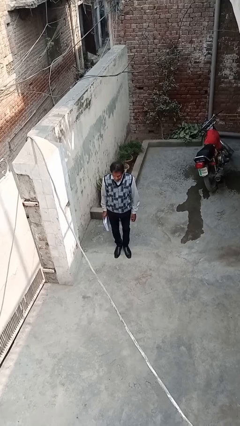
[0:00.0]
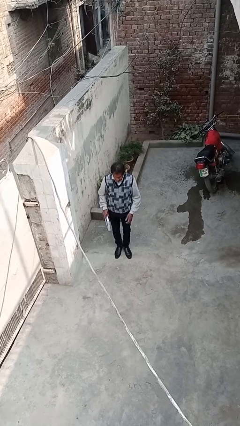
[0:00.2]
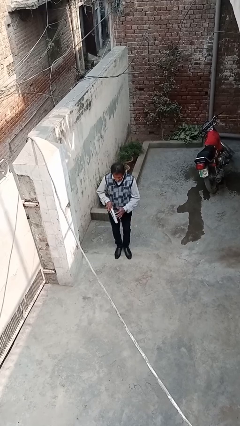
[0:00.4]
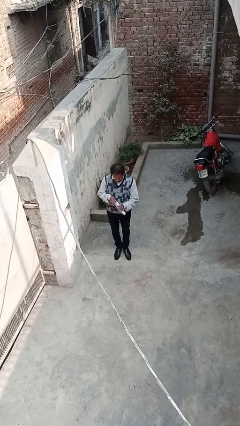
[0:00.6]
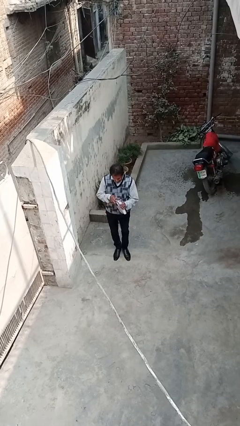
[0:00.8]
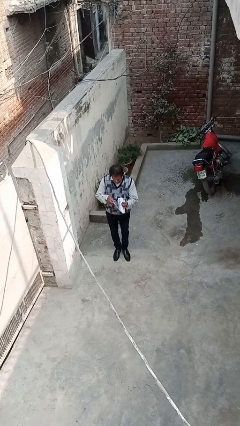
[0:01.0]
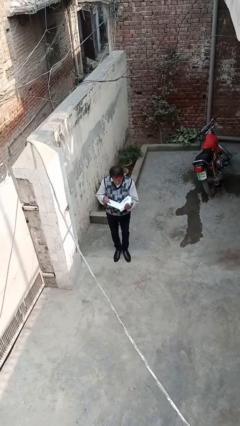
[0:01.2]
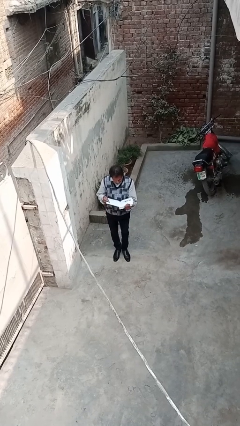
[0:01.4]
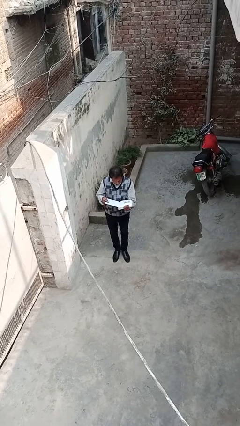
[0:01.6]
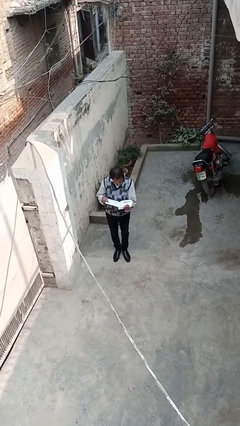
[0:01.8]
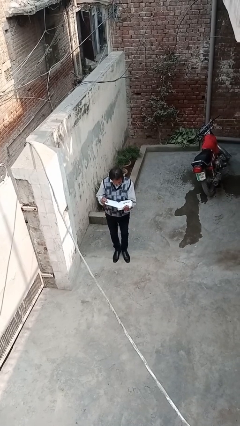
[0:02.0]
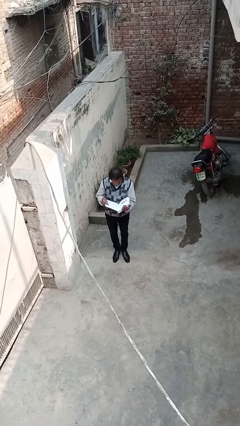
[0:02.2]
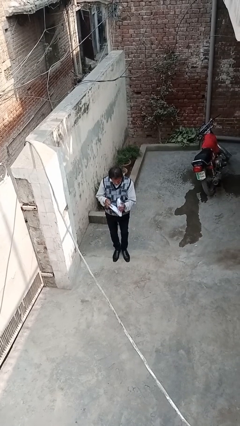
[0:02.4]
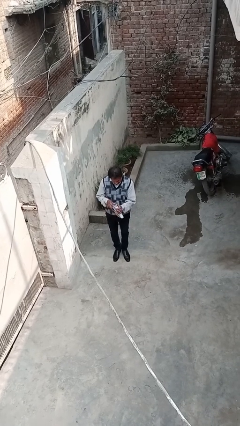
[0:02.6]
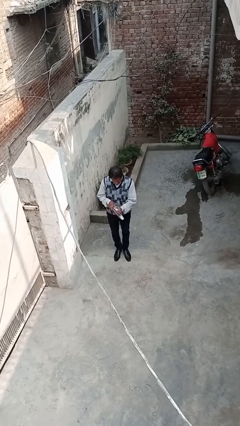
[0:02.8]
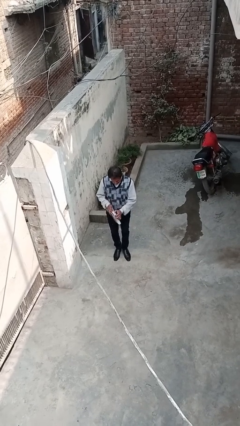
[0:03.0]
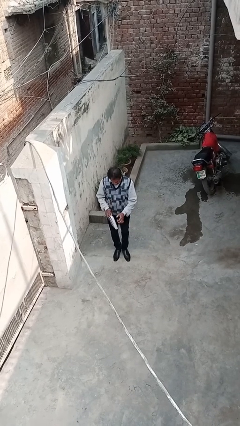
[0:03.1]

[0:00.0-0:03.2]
person reads document

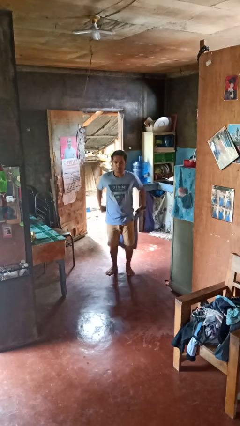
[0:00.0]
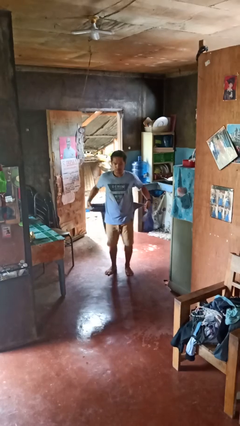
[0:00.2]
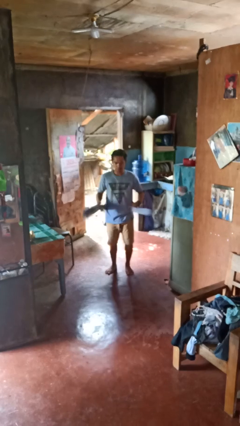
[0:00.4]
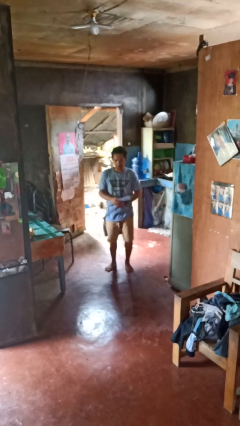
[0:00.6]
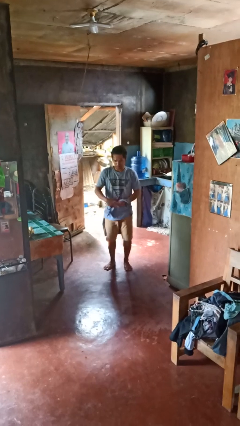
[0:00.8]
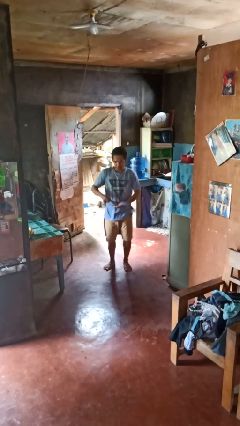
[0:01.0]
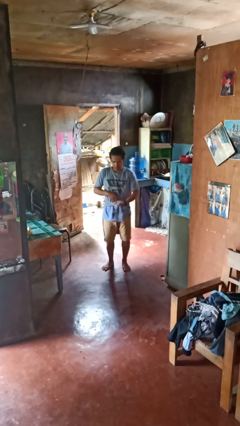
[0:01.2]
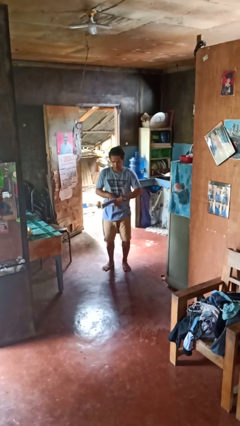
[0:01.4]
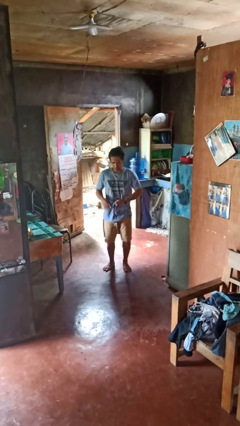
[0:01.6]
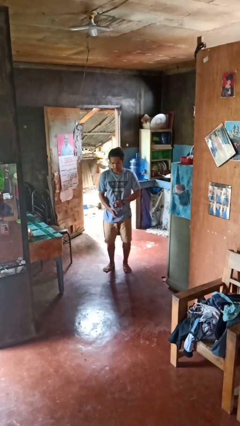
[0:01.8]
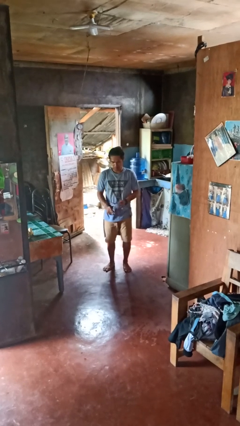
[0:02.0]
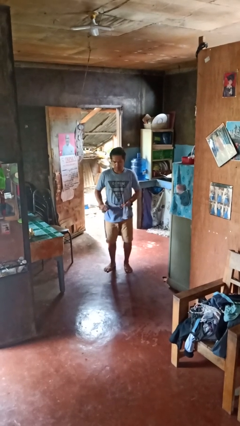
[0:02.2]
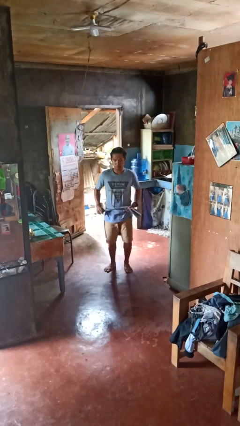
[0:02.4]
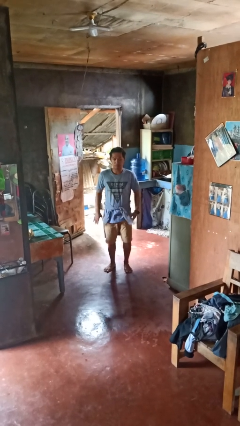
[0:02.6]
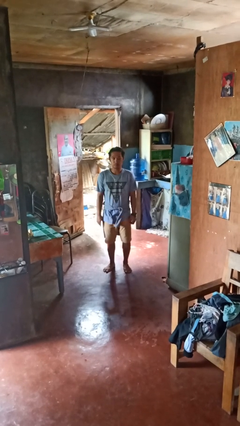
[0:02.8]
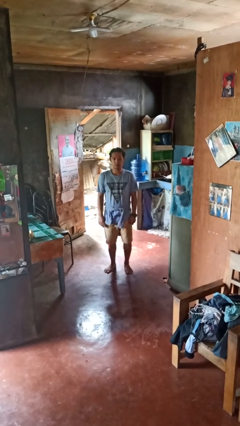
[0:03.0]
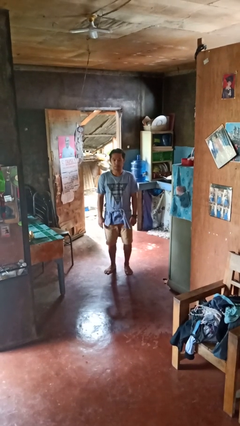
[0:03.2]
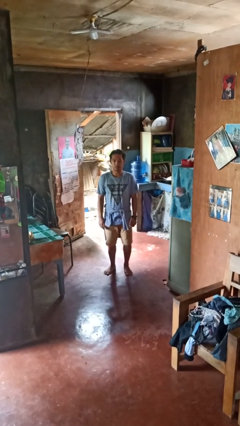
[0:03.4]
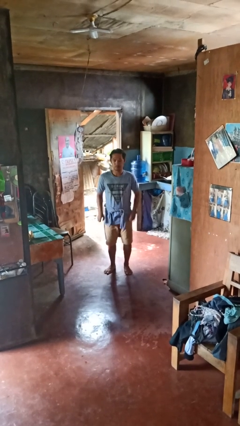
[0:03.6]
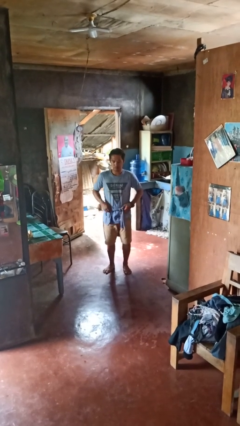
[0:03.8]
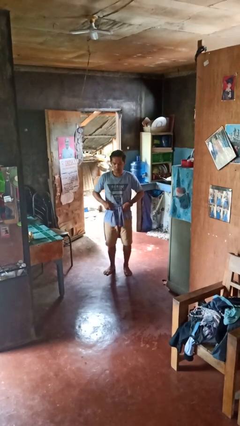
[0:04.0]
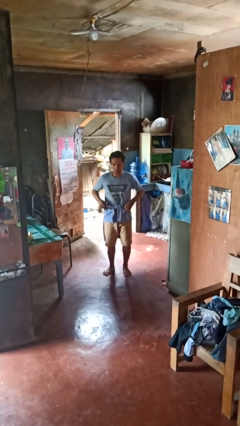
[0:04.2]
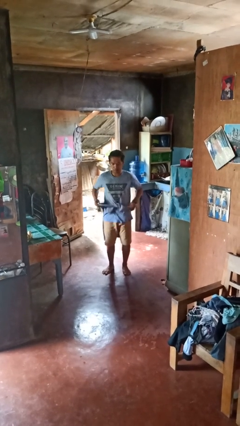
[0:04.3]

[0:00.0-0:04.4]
person ties jacket around waist

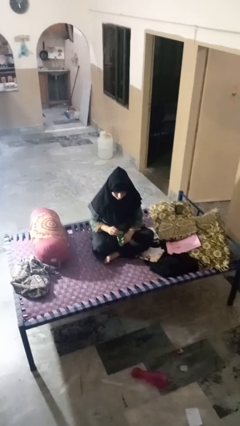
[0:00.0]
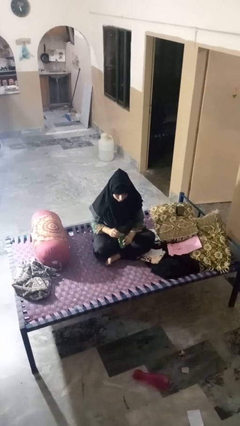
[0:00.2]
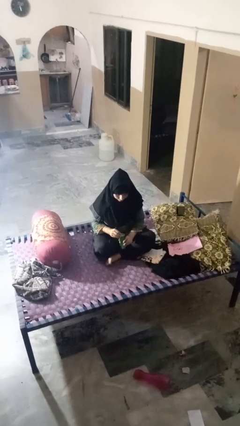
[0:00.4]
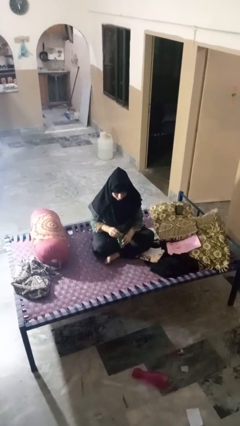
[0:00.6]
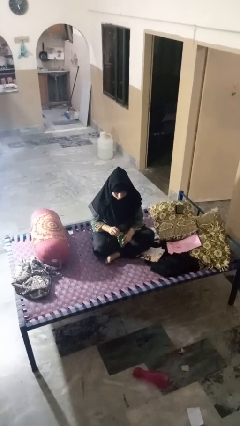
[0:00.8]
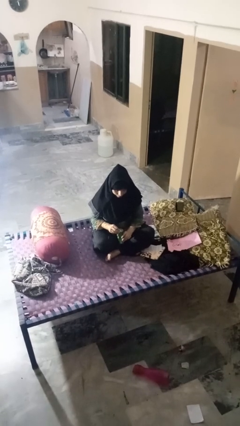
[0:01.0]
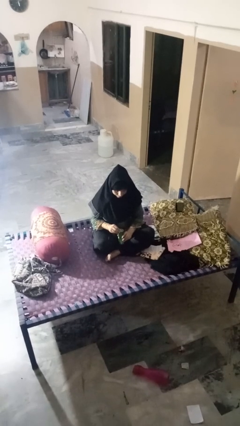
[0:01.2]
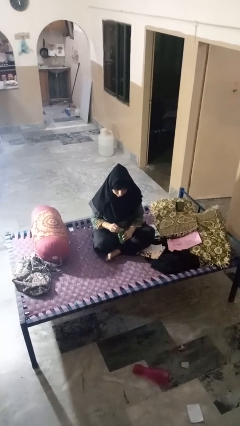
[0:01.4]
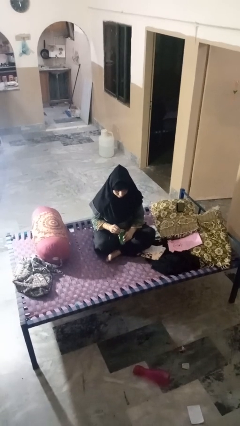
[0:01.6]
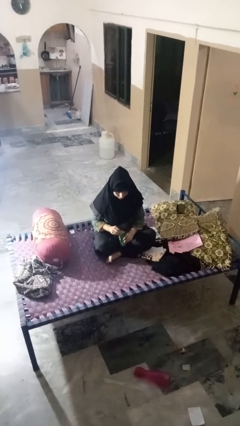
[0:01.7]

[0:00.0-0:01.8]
person opens can with can opener

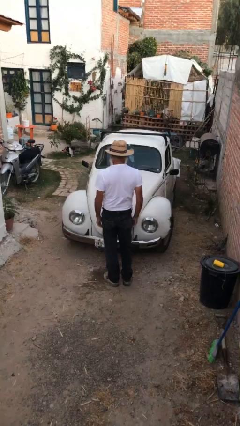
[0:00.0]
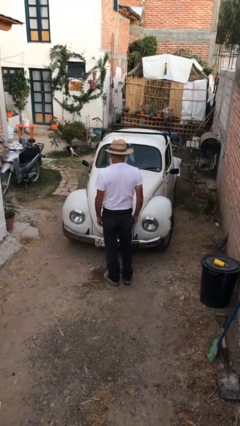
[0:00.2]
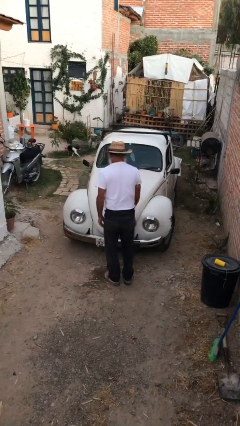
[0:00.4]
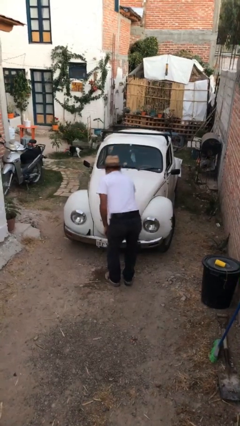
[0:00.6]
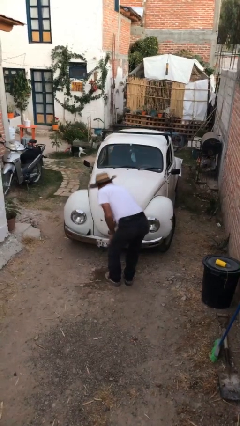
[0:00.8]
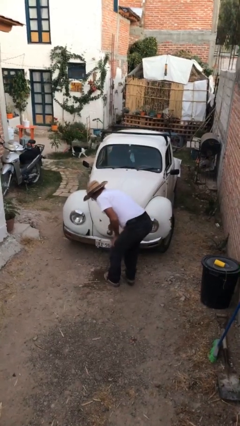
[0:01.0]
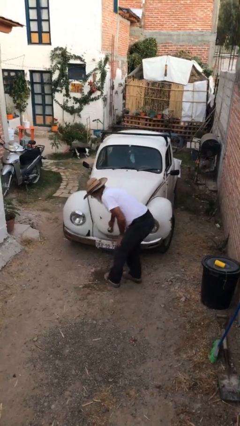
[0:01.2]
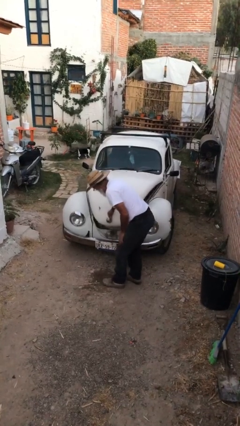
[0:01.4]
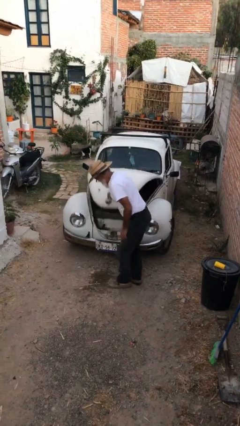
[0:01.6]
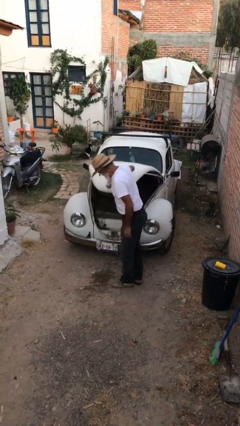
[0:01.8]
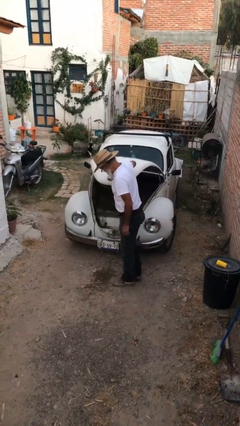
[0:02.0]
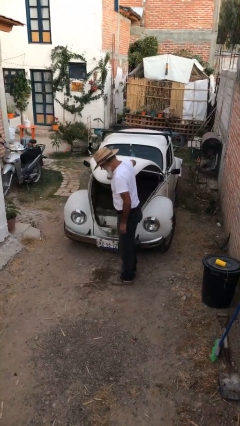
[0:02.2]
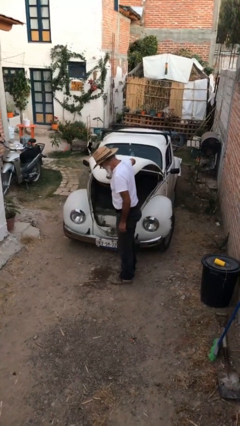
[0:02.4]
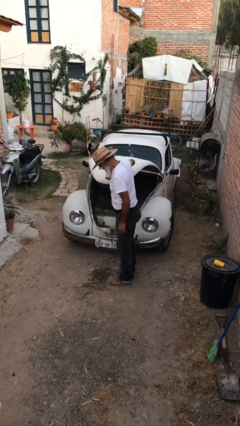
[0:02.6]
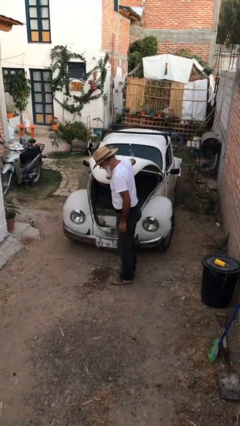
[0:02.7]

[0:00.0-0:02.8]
person opens car trunk

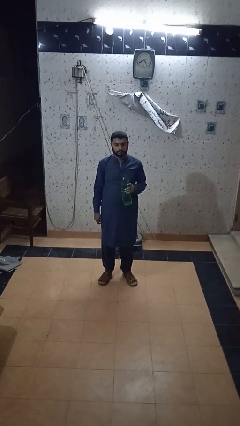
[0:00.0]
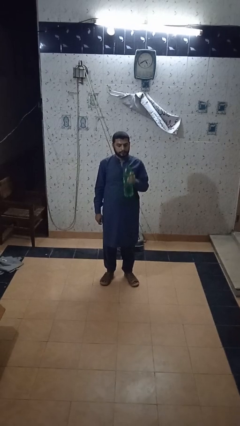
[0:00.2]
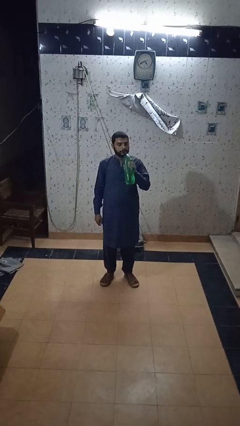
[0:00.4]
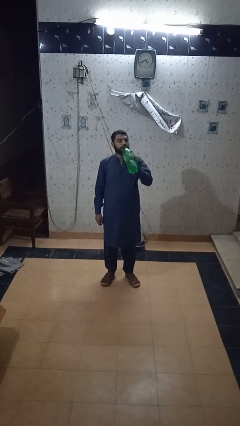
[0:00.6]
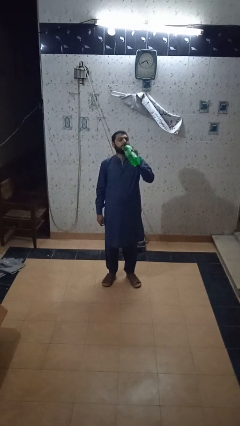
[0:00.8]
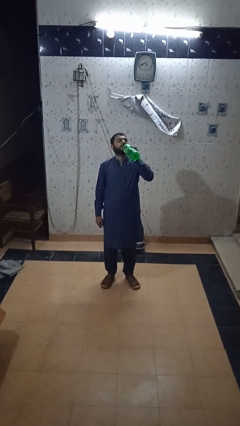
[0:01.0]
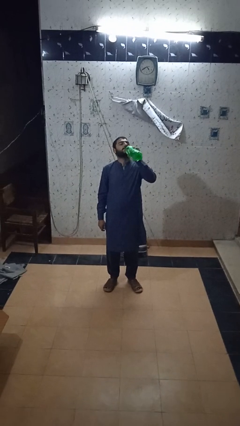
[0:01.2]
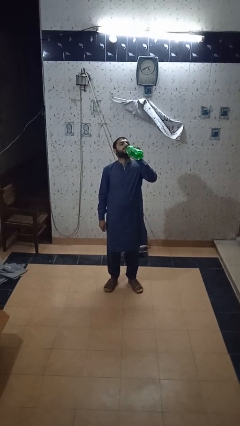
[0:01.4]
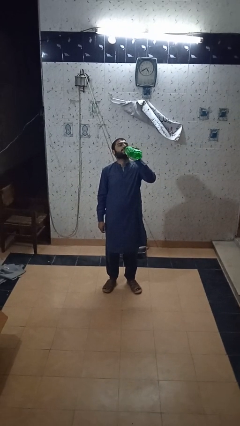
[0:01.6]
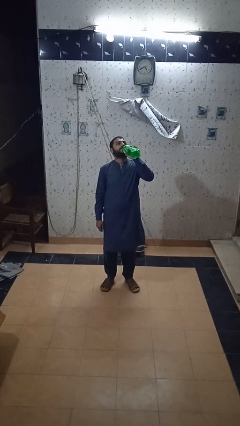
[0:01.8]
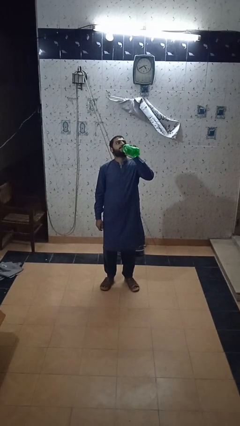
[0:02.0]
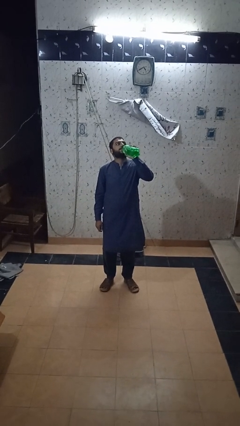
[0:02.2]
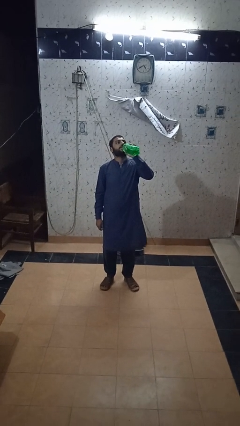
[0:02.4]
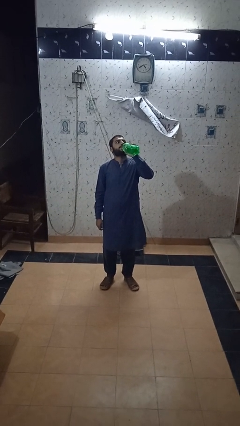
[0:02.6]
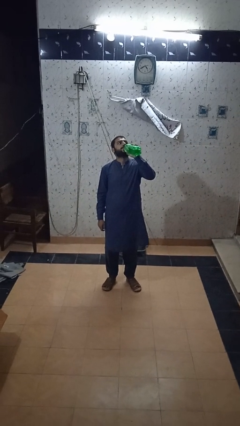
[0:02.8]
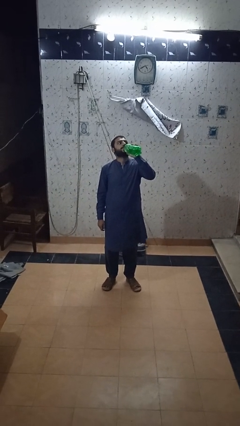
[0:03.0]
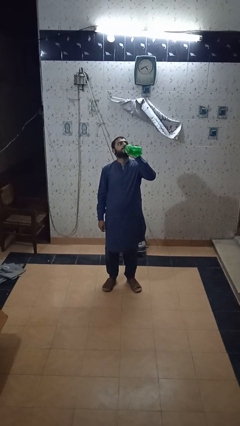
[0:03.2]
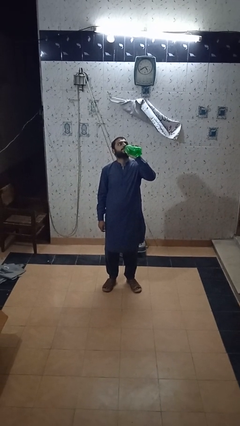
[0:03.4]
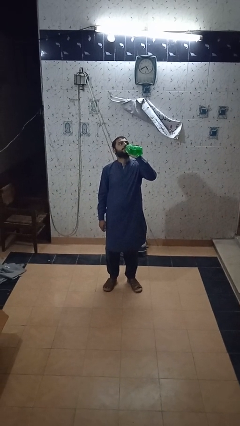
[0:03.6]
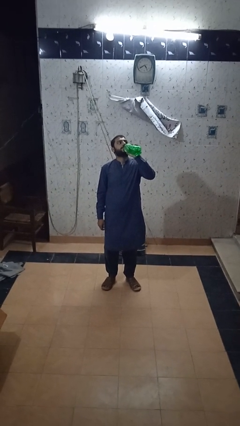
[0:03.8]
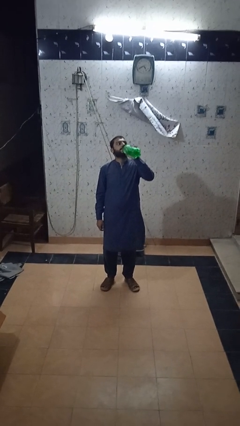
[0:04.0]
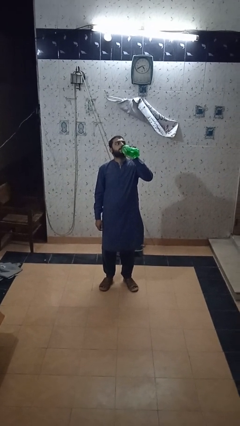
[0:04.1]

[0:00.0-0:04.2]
person drinks from bottle

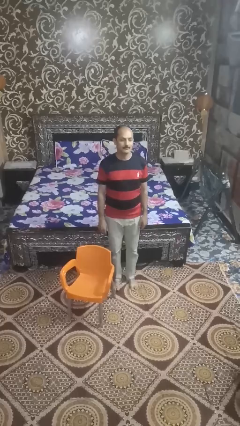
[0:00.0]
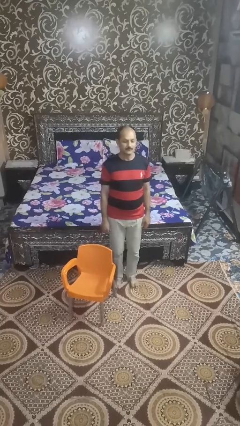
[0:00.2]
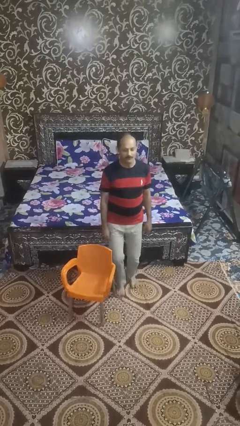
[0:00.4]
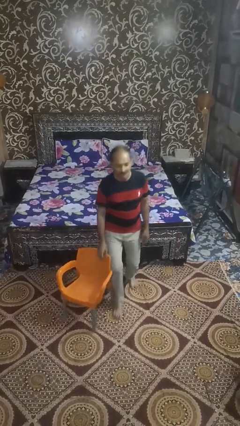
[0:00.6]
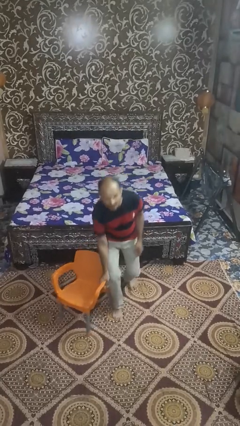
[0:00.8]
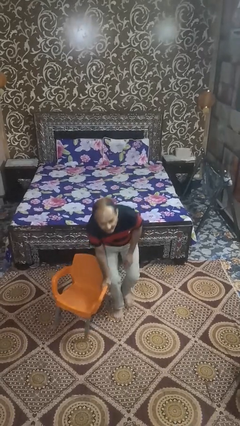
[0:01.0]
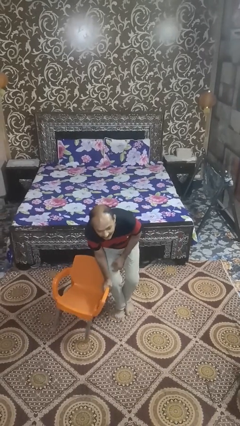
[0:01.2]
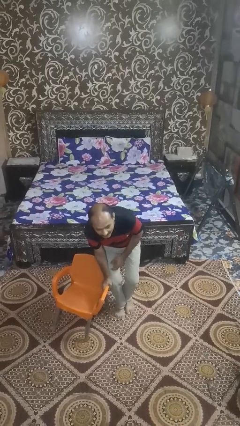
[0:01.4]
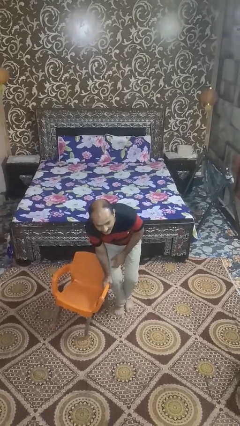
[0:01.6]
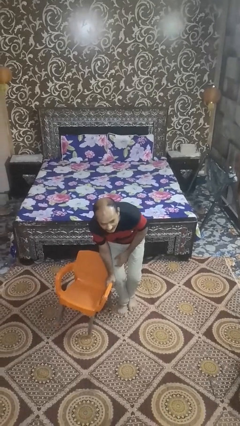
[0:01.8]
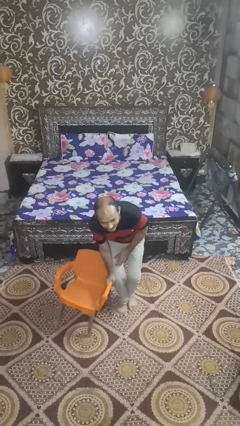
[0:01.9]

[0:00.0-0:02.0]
person trips on object on floor
